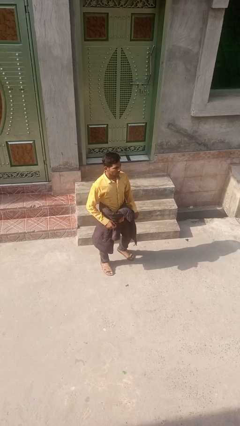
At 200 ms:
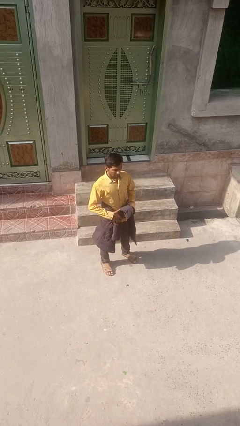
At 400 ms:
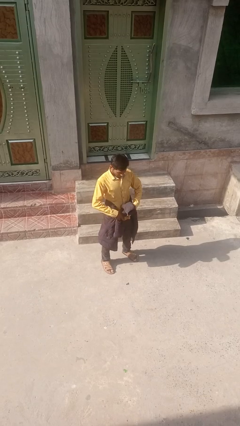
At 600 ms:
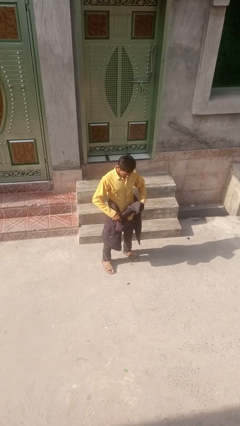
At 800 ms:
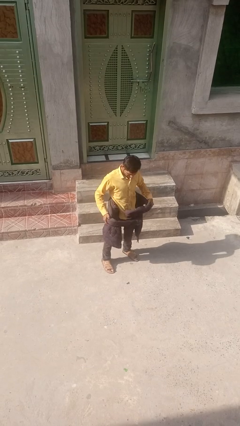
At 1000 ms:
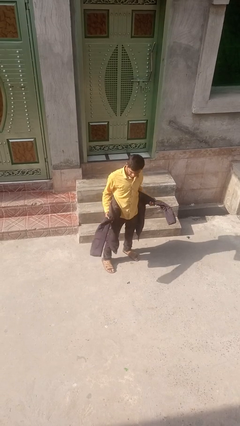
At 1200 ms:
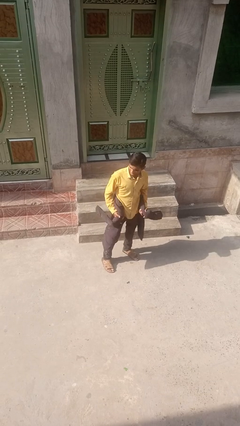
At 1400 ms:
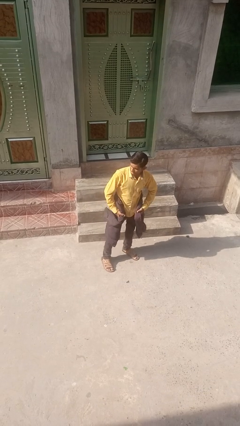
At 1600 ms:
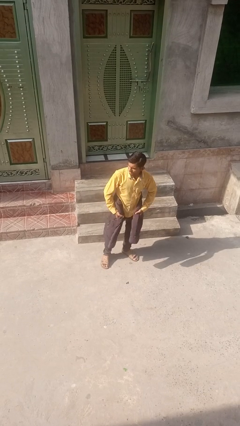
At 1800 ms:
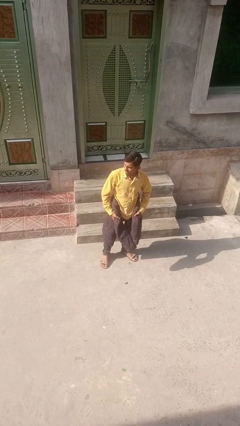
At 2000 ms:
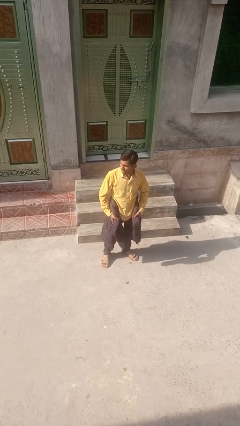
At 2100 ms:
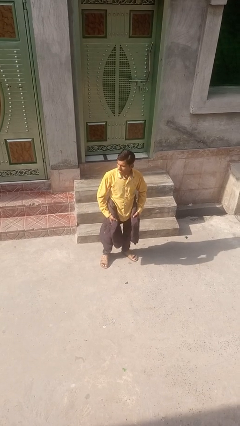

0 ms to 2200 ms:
person unties jacket around waist

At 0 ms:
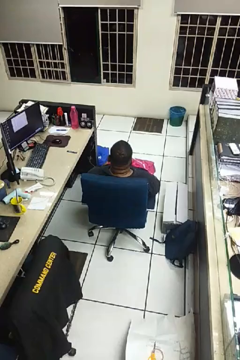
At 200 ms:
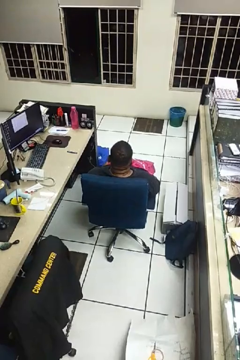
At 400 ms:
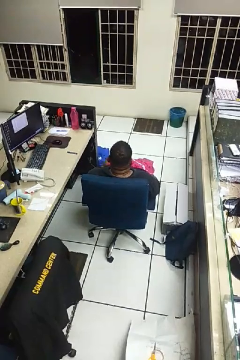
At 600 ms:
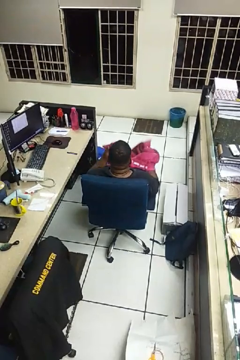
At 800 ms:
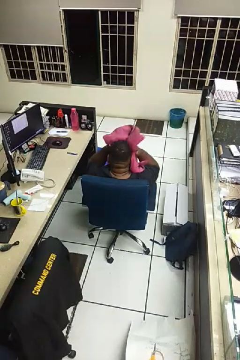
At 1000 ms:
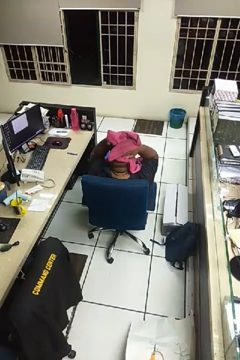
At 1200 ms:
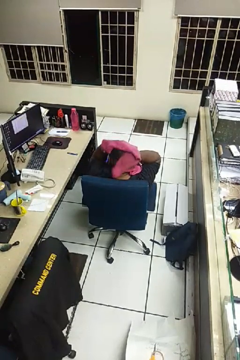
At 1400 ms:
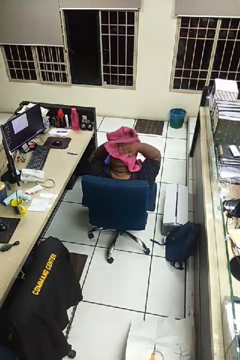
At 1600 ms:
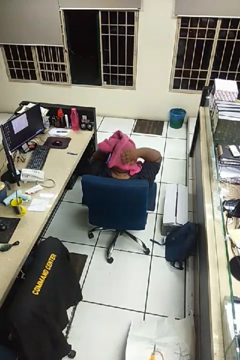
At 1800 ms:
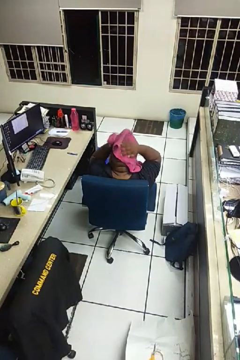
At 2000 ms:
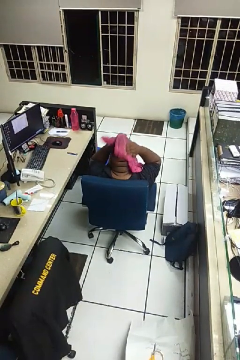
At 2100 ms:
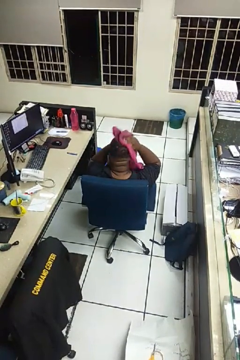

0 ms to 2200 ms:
person dries hair with towel

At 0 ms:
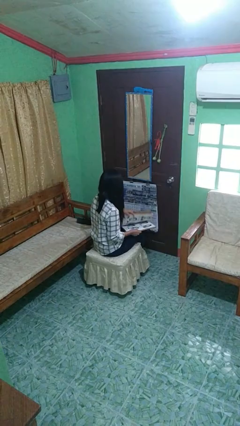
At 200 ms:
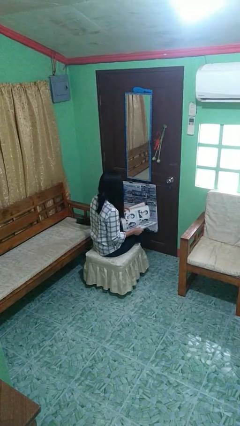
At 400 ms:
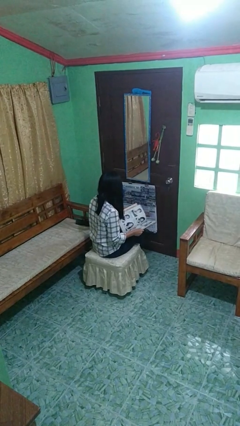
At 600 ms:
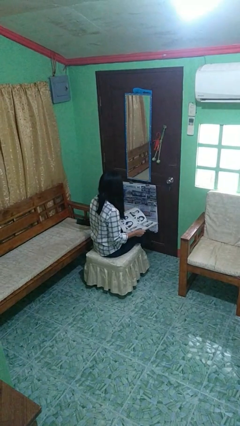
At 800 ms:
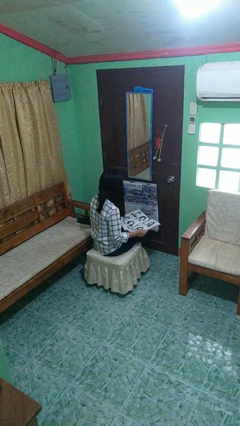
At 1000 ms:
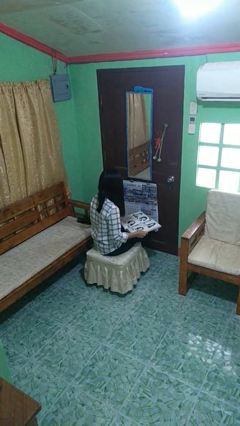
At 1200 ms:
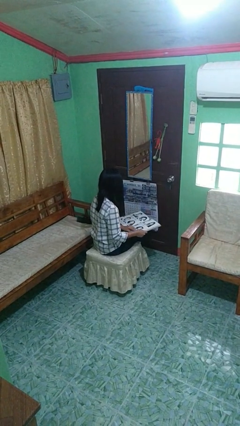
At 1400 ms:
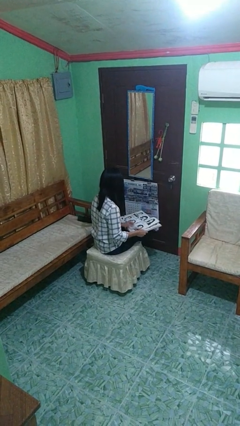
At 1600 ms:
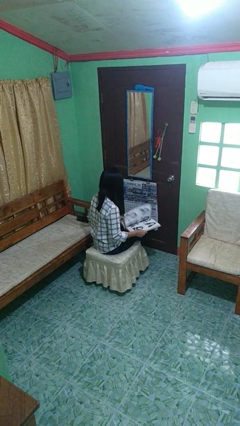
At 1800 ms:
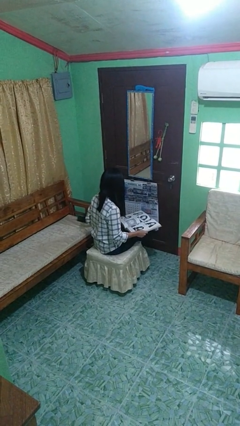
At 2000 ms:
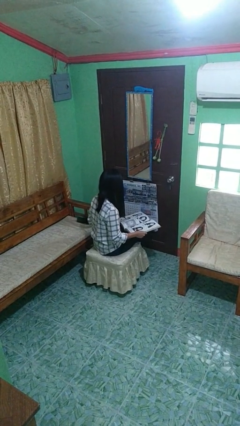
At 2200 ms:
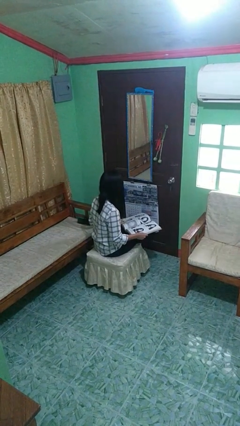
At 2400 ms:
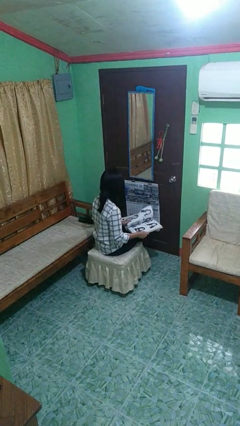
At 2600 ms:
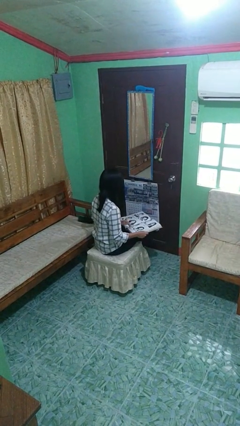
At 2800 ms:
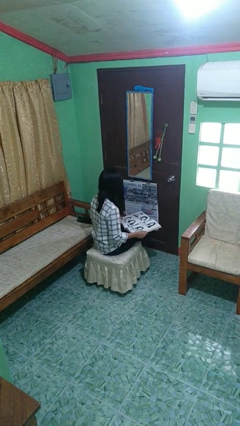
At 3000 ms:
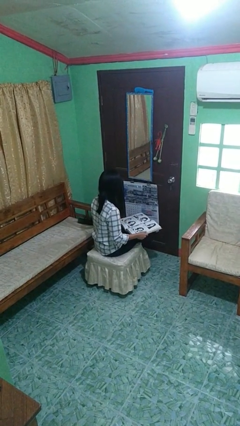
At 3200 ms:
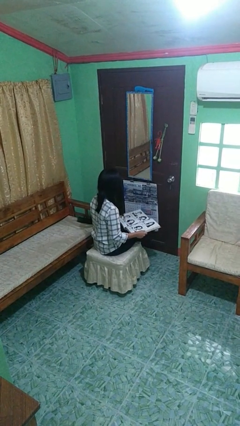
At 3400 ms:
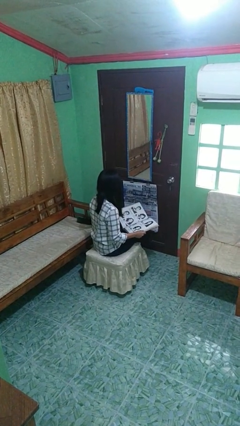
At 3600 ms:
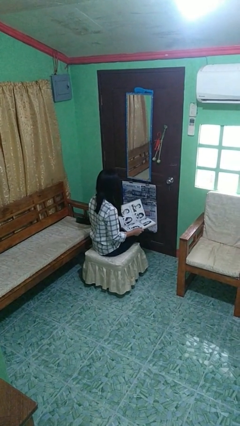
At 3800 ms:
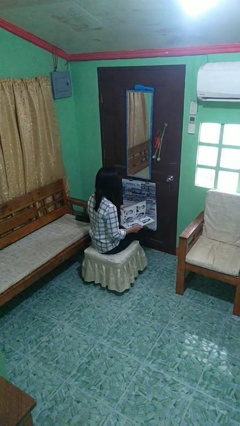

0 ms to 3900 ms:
person reads book

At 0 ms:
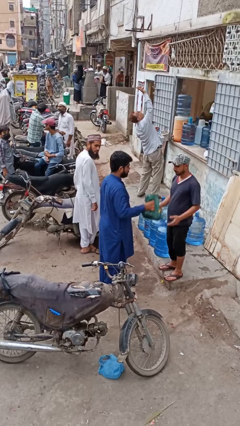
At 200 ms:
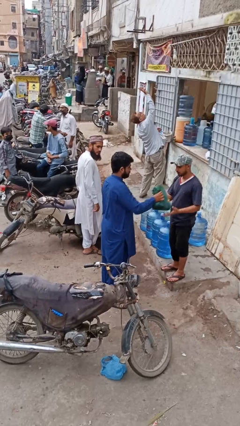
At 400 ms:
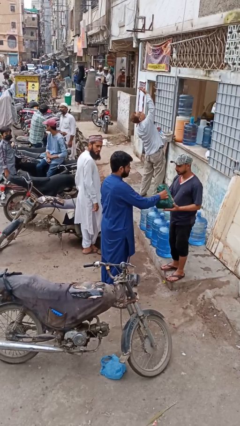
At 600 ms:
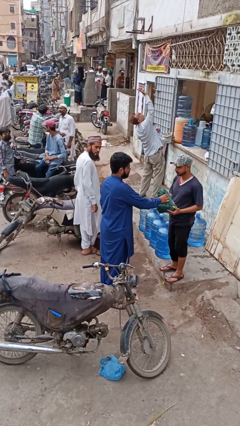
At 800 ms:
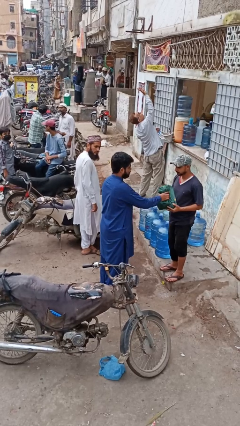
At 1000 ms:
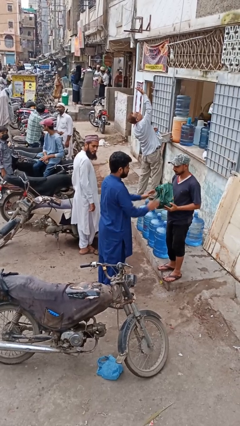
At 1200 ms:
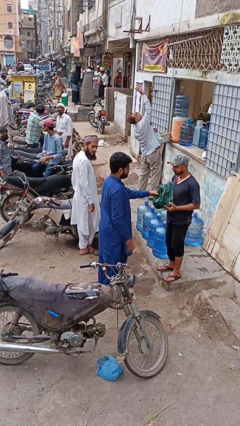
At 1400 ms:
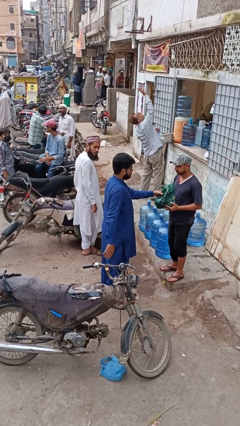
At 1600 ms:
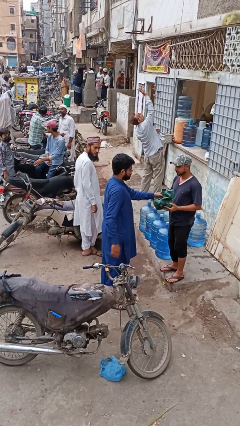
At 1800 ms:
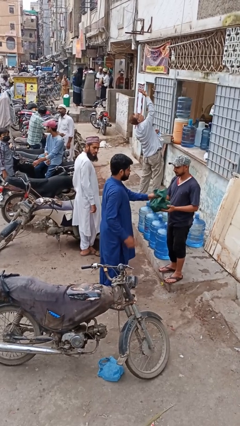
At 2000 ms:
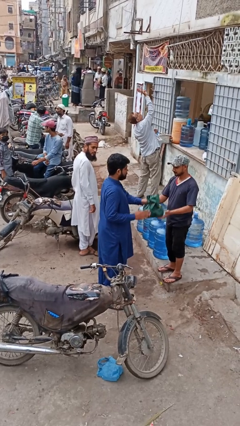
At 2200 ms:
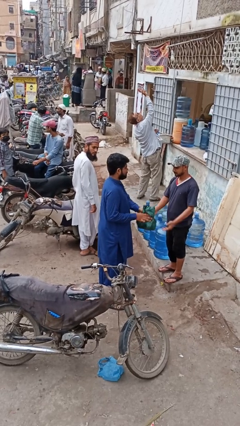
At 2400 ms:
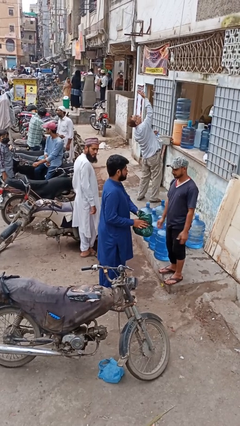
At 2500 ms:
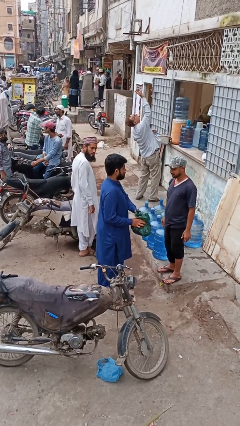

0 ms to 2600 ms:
person transfers object to person

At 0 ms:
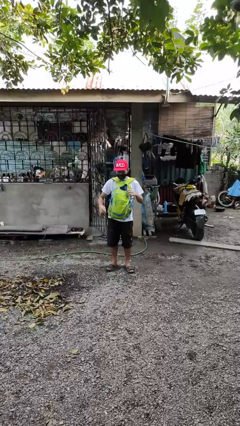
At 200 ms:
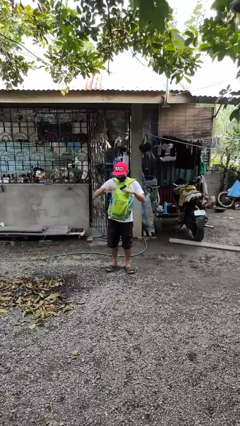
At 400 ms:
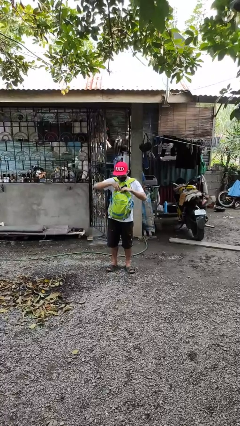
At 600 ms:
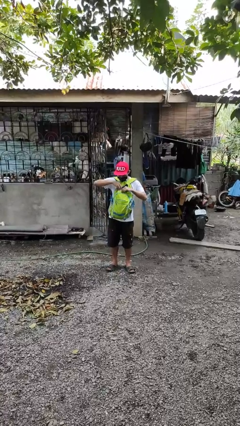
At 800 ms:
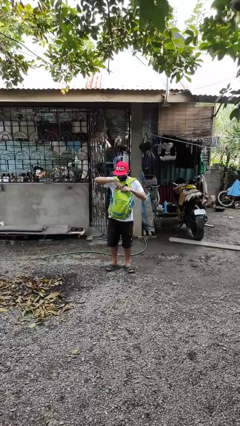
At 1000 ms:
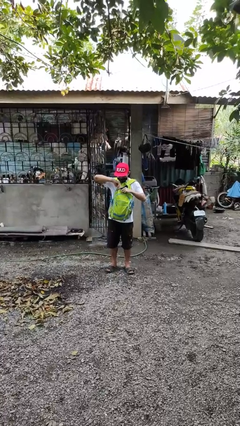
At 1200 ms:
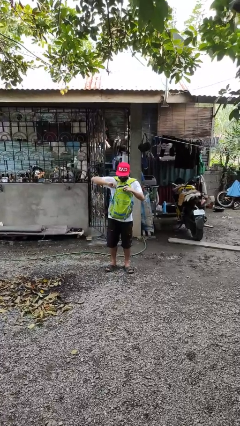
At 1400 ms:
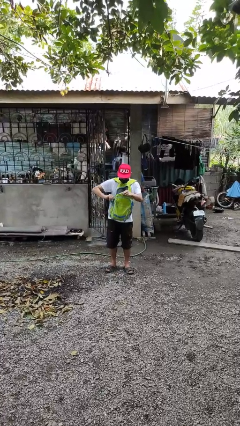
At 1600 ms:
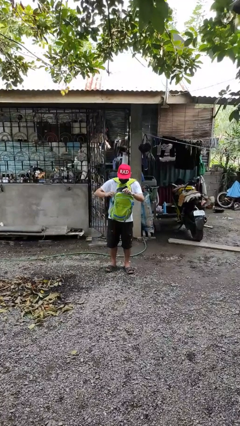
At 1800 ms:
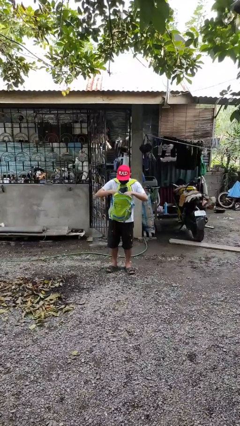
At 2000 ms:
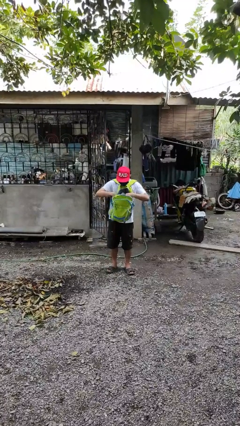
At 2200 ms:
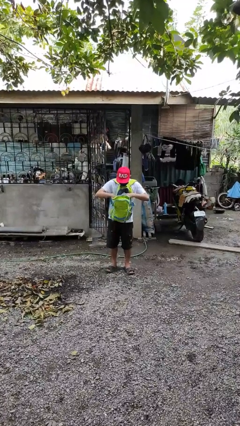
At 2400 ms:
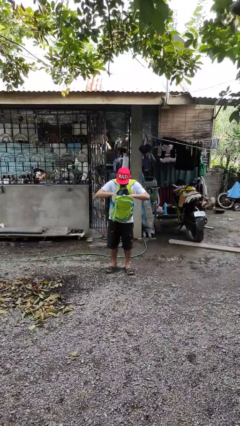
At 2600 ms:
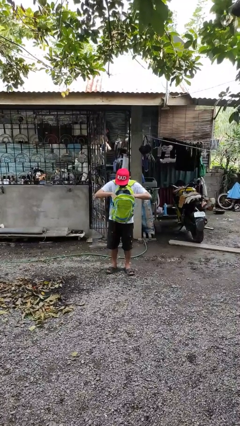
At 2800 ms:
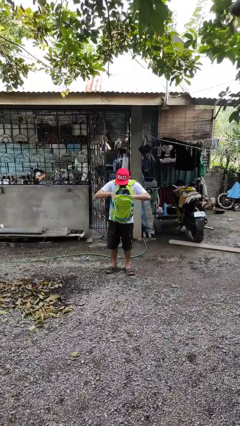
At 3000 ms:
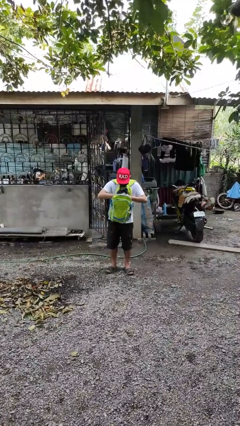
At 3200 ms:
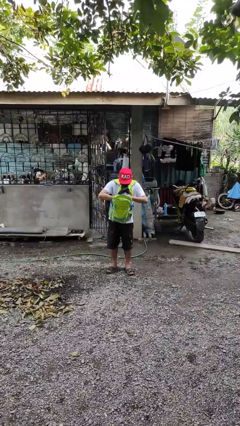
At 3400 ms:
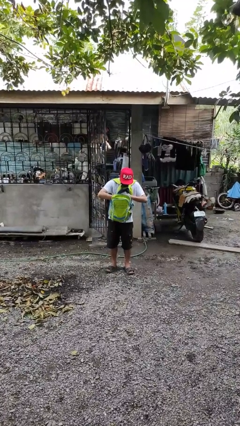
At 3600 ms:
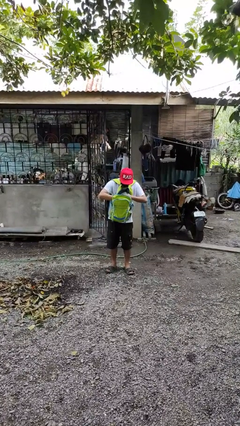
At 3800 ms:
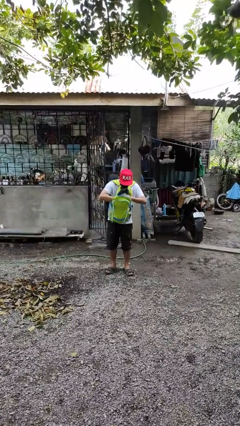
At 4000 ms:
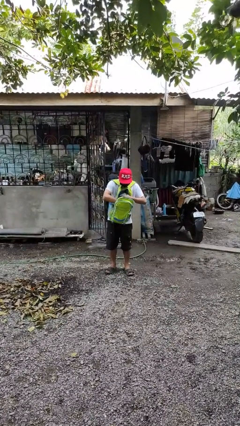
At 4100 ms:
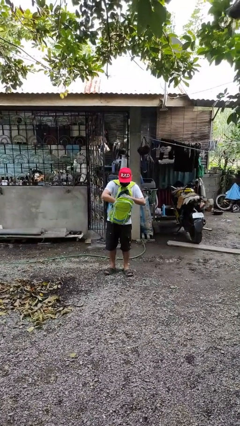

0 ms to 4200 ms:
person searches in backpack

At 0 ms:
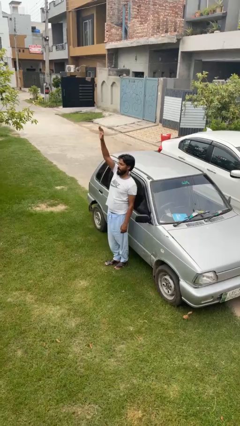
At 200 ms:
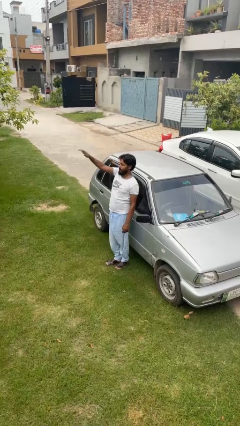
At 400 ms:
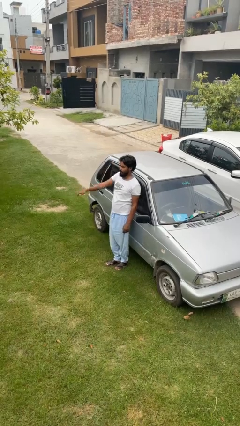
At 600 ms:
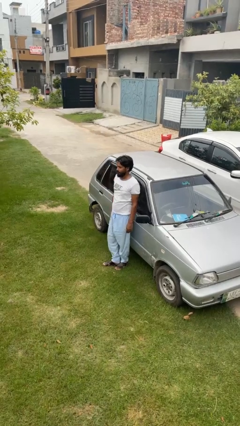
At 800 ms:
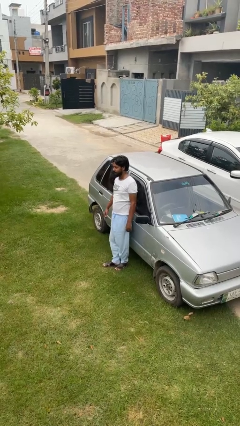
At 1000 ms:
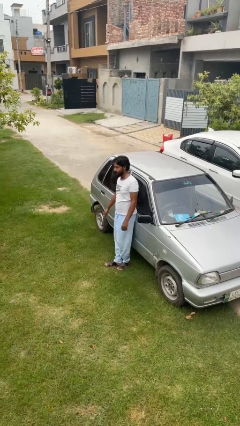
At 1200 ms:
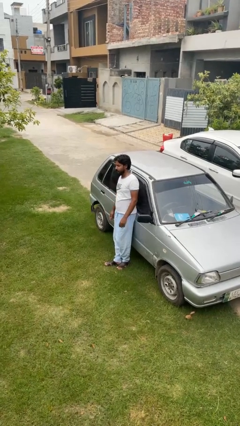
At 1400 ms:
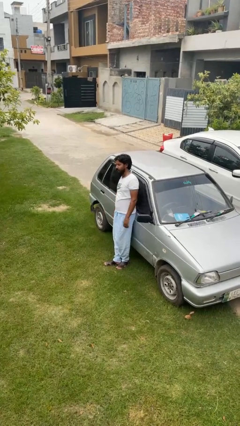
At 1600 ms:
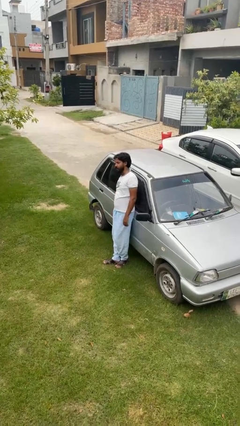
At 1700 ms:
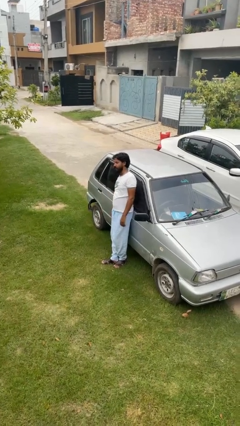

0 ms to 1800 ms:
person gestures lower hand

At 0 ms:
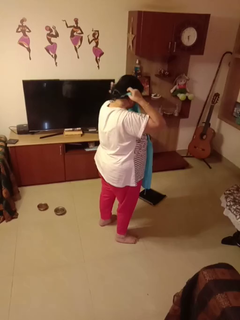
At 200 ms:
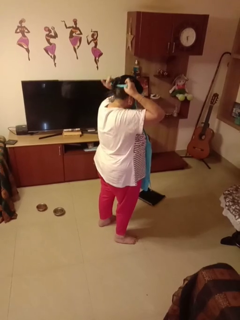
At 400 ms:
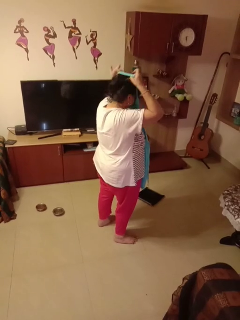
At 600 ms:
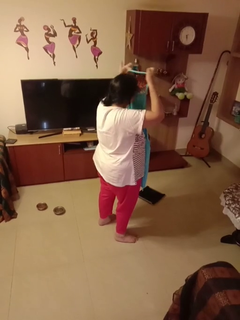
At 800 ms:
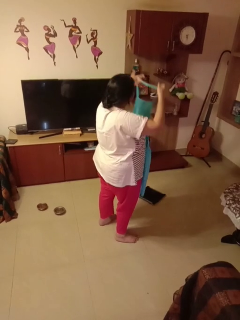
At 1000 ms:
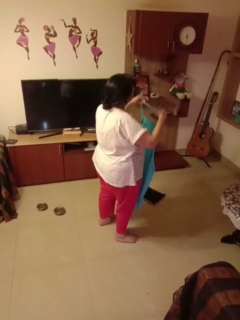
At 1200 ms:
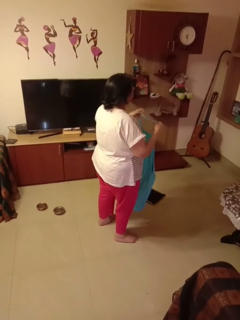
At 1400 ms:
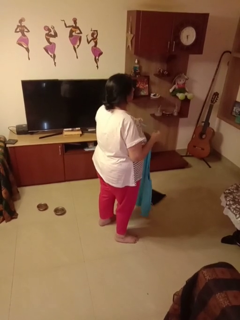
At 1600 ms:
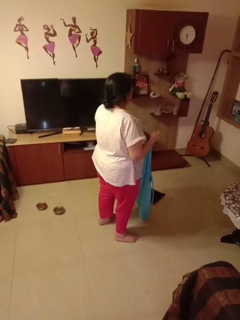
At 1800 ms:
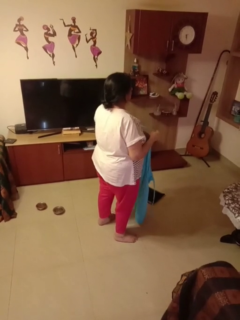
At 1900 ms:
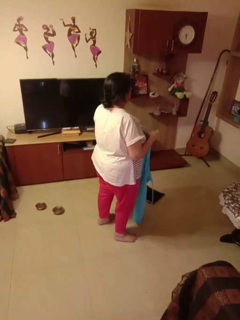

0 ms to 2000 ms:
person takes off apron
